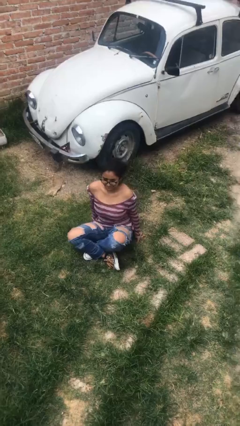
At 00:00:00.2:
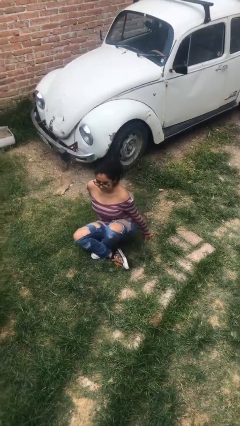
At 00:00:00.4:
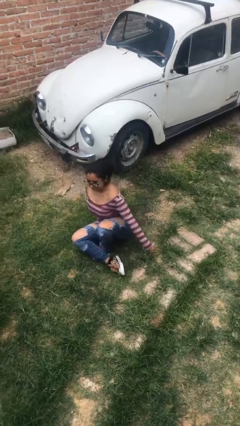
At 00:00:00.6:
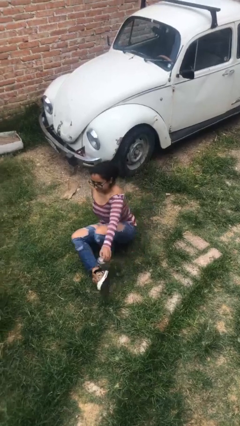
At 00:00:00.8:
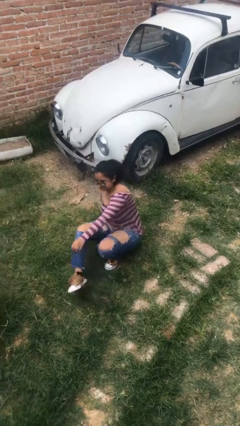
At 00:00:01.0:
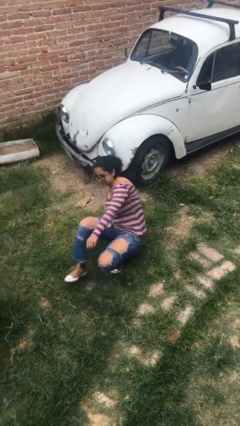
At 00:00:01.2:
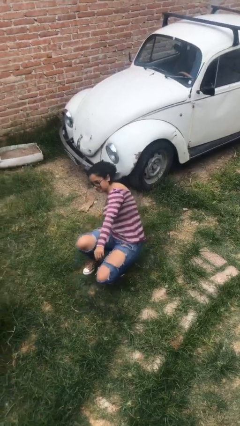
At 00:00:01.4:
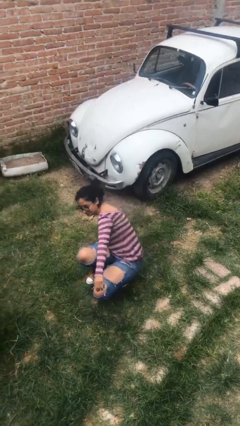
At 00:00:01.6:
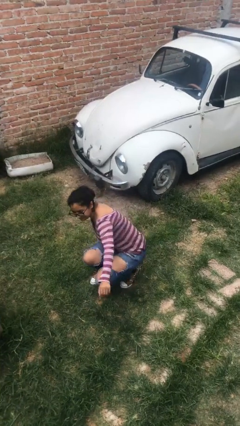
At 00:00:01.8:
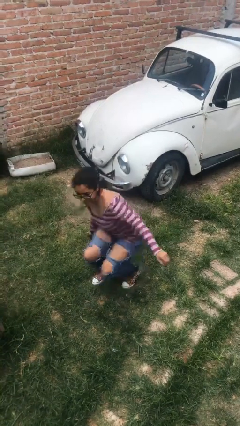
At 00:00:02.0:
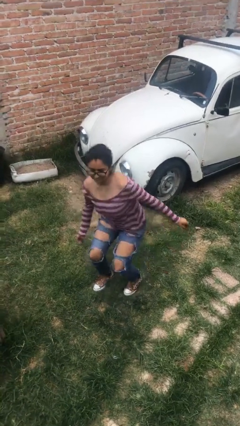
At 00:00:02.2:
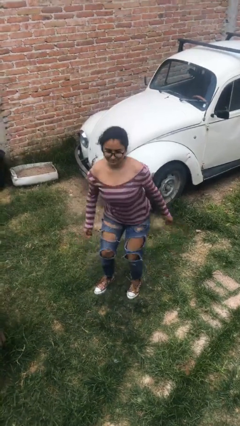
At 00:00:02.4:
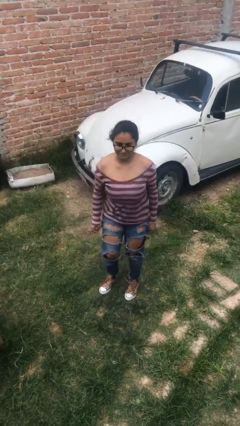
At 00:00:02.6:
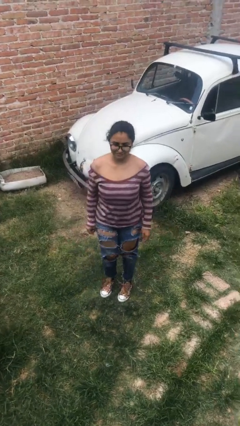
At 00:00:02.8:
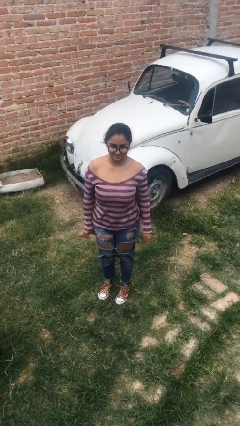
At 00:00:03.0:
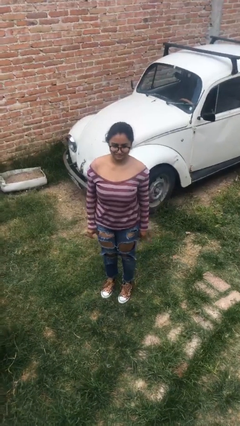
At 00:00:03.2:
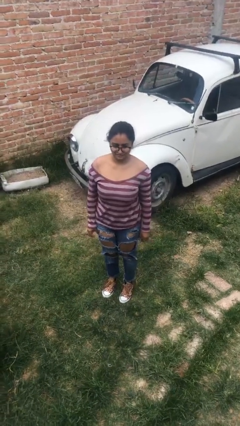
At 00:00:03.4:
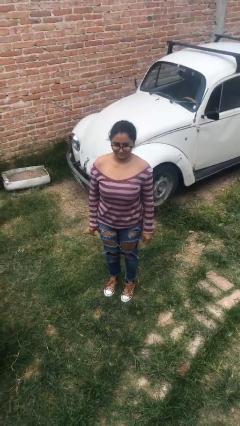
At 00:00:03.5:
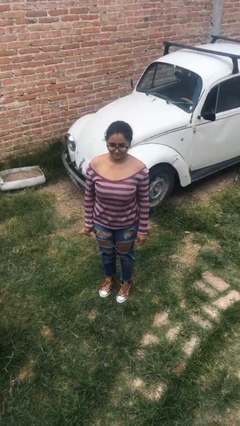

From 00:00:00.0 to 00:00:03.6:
person stands up from floor

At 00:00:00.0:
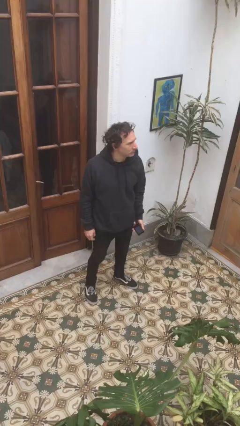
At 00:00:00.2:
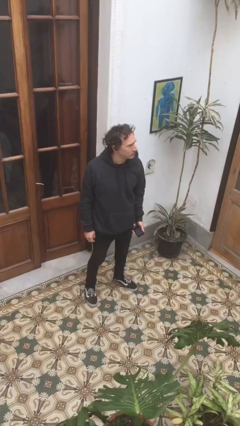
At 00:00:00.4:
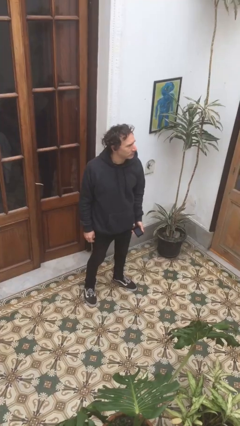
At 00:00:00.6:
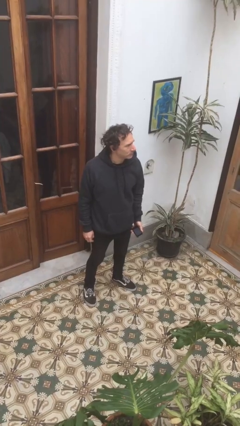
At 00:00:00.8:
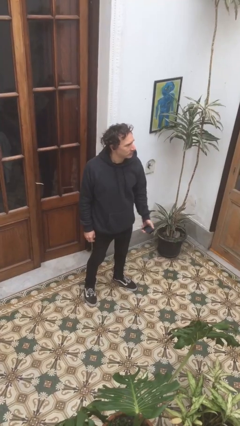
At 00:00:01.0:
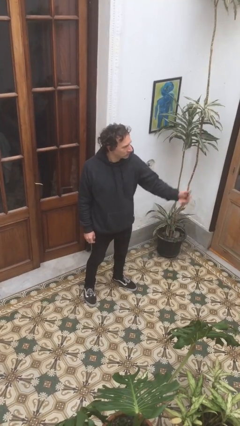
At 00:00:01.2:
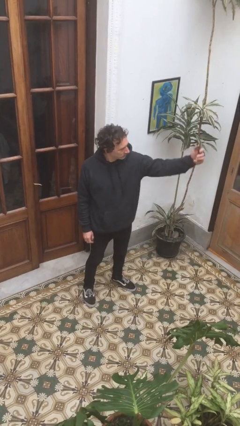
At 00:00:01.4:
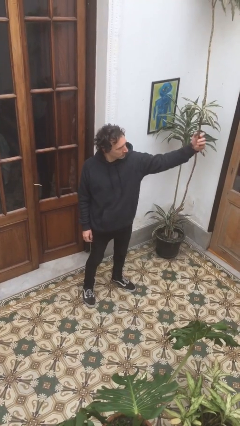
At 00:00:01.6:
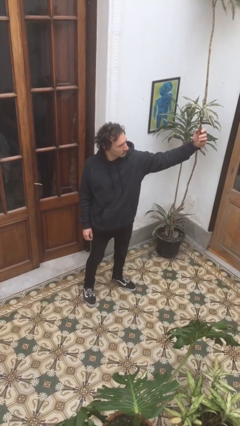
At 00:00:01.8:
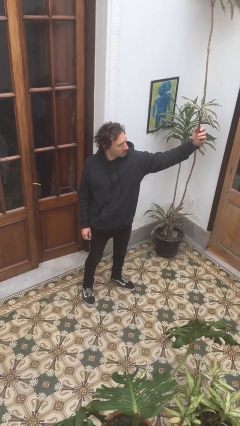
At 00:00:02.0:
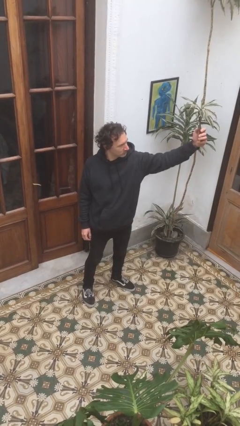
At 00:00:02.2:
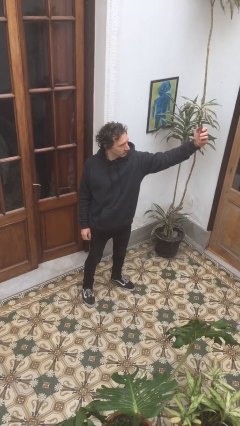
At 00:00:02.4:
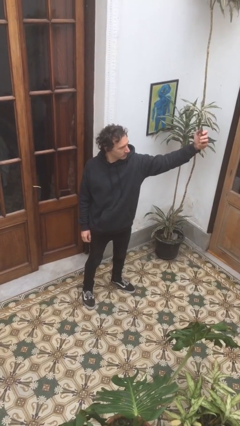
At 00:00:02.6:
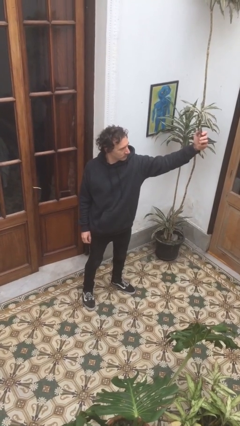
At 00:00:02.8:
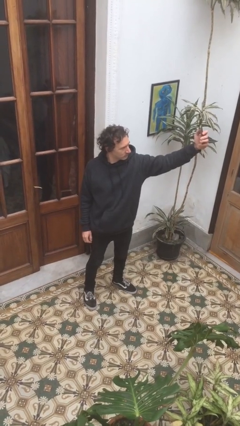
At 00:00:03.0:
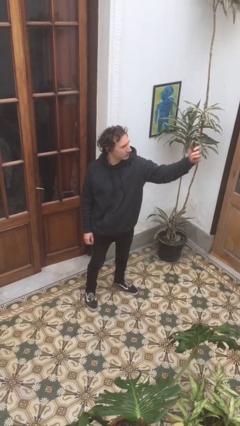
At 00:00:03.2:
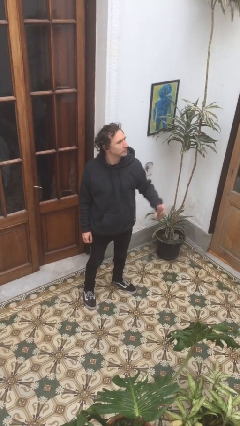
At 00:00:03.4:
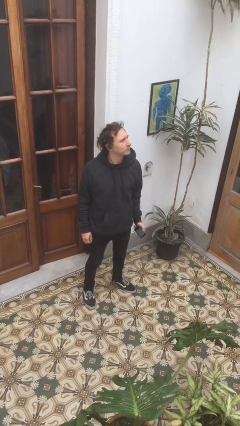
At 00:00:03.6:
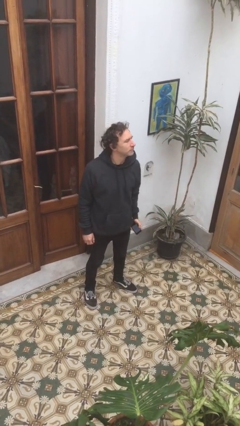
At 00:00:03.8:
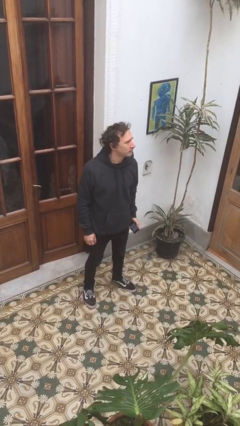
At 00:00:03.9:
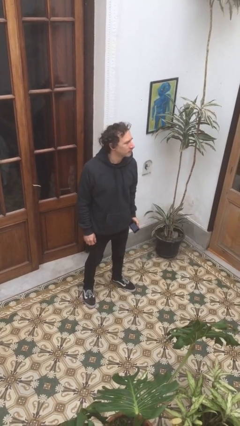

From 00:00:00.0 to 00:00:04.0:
person takes selfie

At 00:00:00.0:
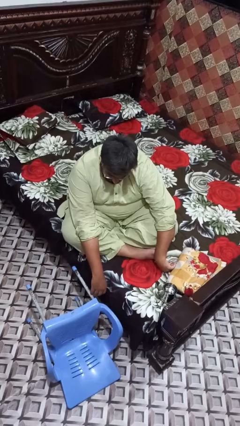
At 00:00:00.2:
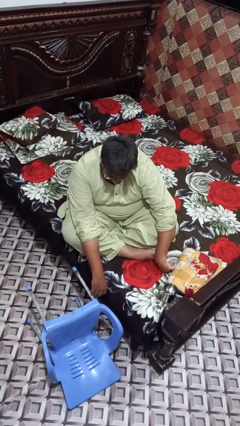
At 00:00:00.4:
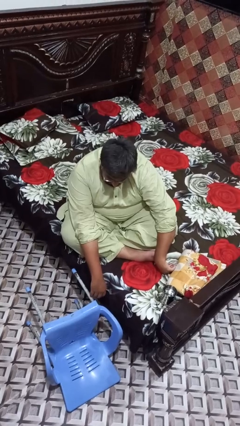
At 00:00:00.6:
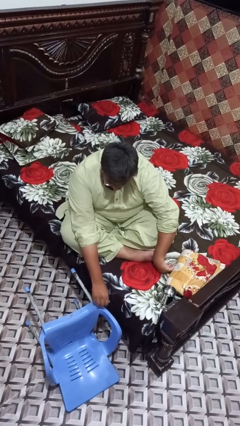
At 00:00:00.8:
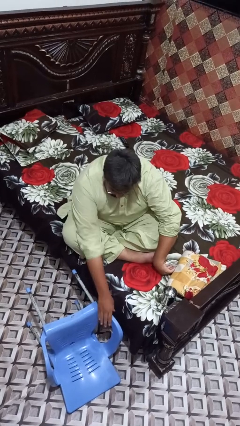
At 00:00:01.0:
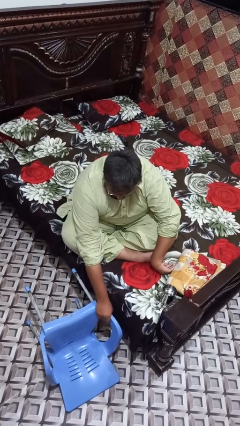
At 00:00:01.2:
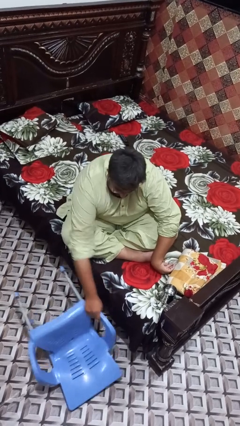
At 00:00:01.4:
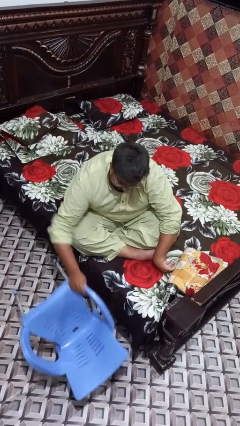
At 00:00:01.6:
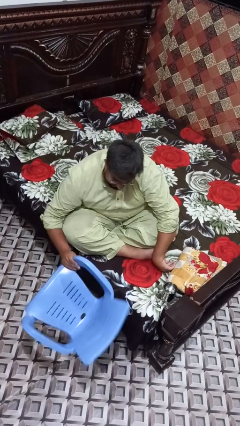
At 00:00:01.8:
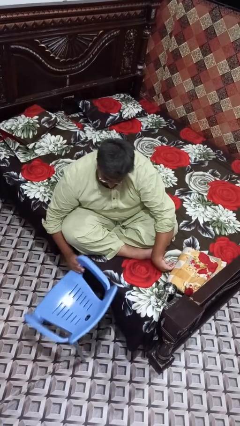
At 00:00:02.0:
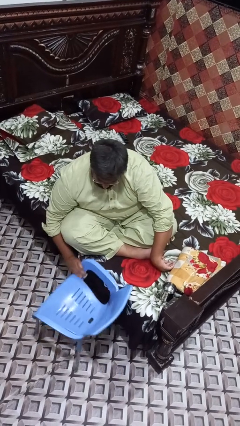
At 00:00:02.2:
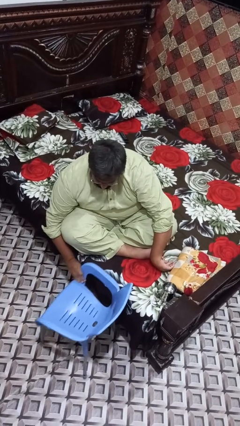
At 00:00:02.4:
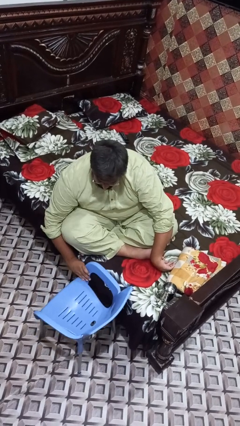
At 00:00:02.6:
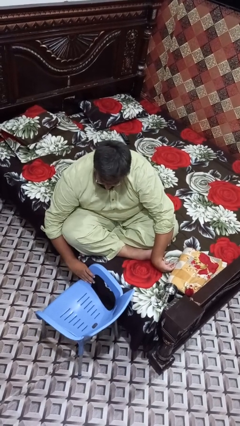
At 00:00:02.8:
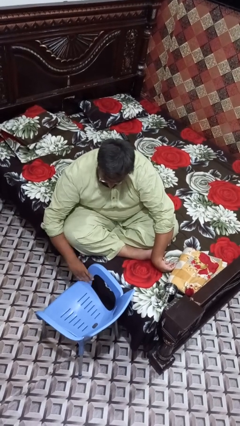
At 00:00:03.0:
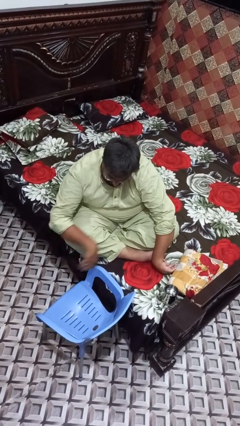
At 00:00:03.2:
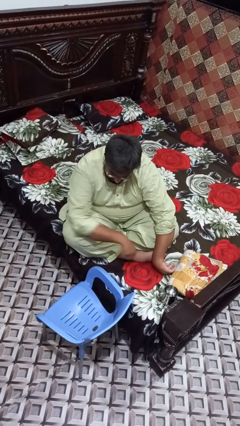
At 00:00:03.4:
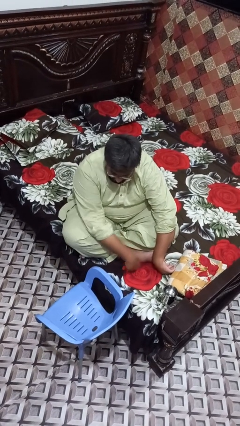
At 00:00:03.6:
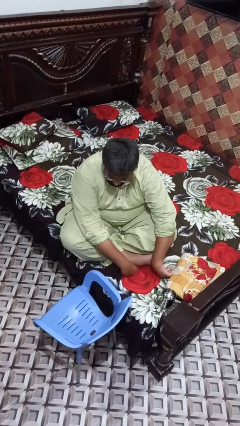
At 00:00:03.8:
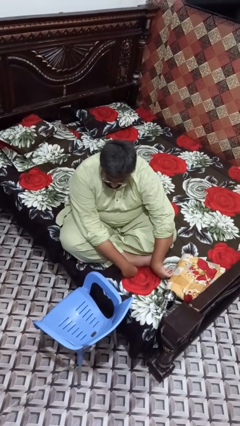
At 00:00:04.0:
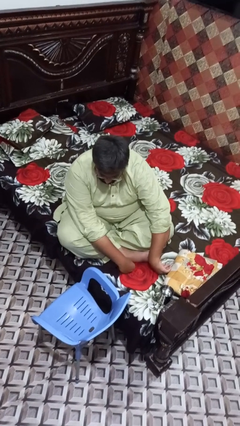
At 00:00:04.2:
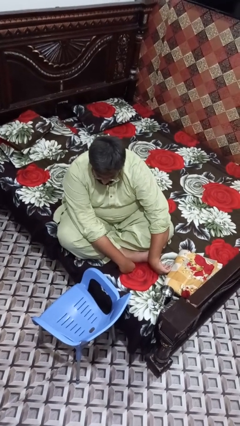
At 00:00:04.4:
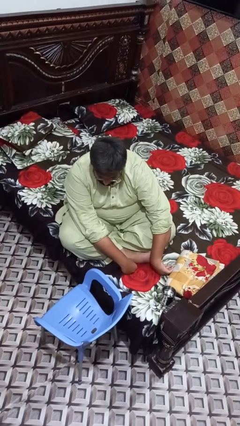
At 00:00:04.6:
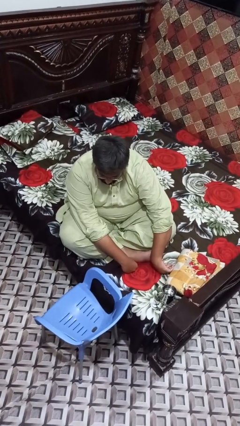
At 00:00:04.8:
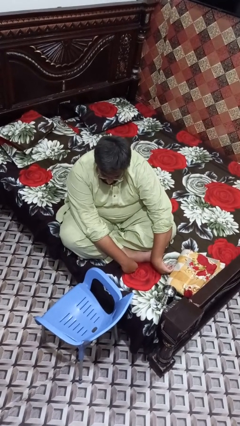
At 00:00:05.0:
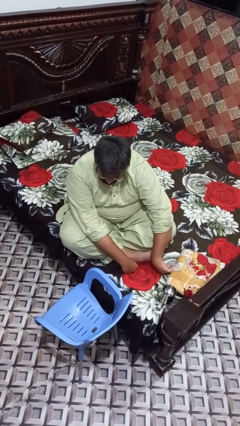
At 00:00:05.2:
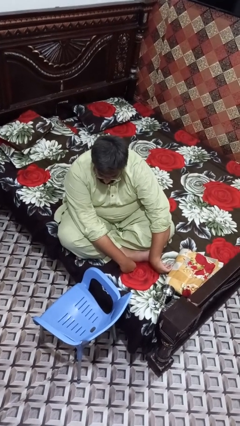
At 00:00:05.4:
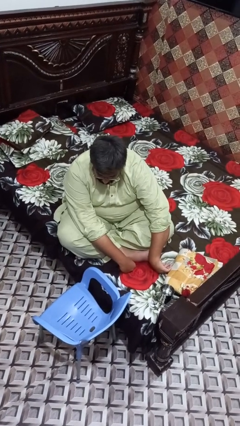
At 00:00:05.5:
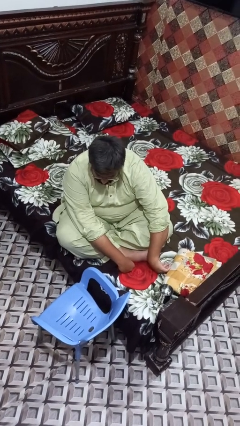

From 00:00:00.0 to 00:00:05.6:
person sets upright furniture

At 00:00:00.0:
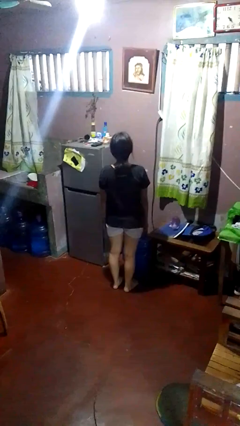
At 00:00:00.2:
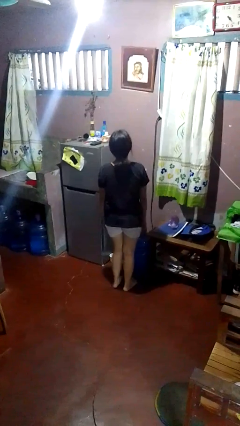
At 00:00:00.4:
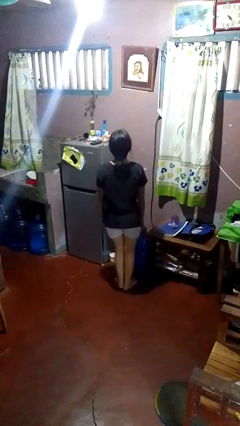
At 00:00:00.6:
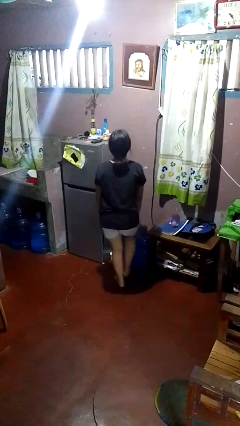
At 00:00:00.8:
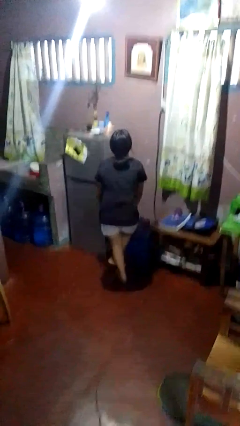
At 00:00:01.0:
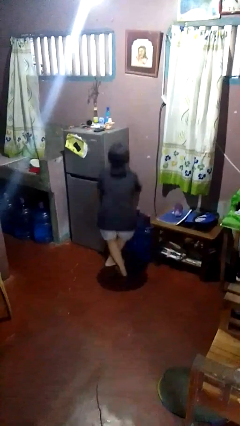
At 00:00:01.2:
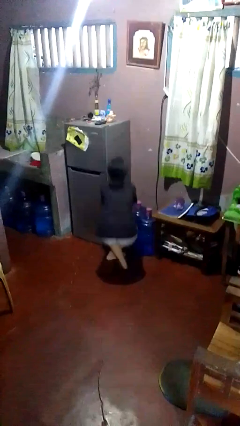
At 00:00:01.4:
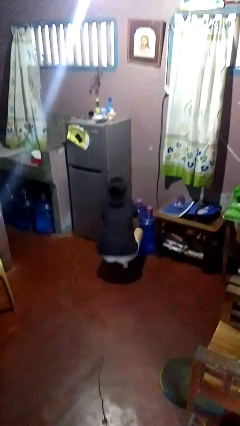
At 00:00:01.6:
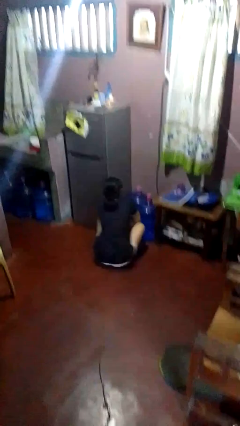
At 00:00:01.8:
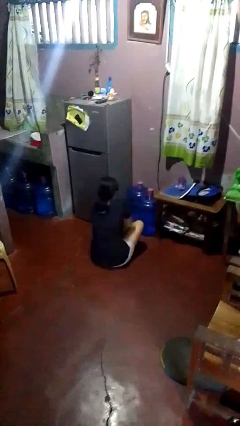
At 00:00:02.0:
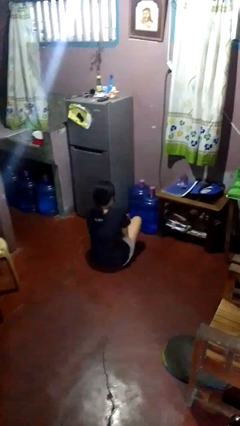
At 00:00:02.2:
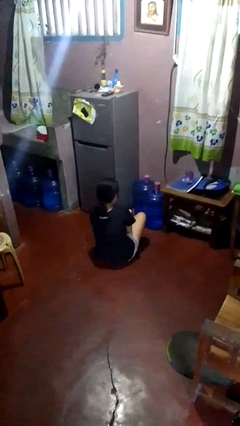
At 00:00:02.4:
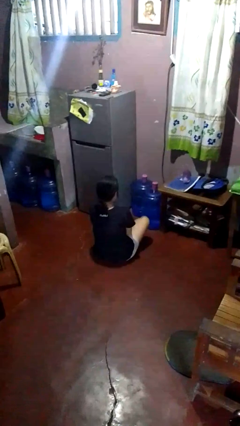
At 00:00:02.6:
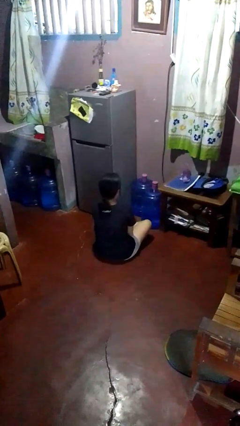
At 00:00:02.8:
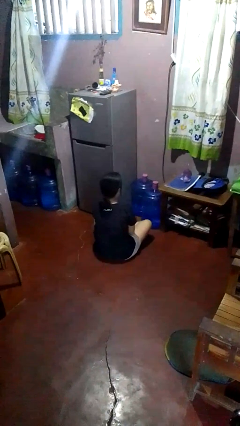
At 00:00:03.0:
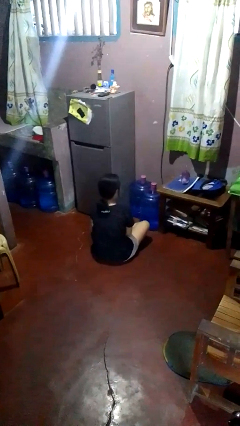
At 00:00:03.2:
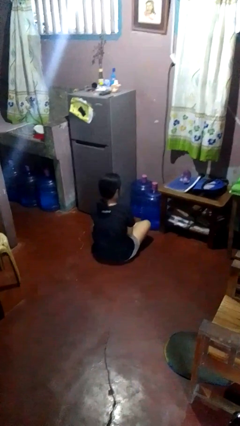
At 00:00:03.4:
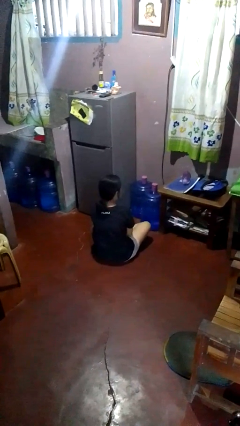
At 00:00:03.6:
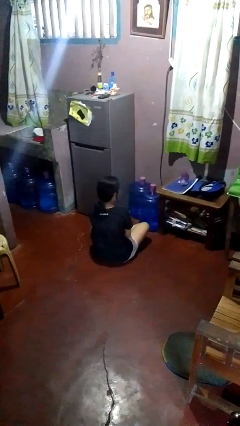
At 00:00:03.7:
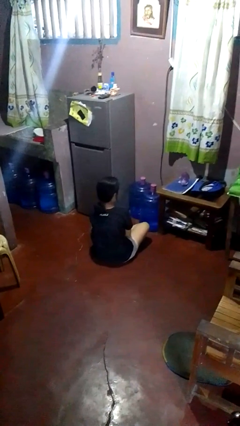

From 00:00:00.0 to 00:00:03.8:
person sits crisscross

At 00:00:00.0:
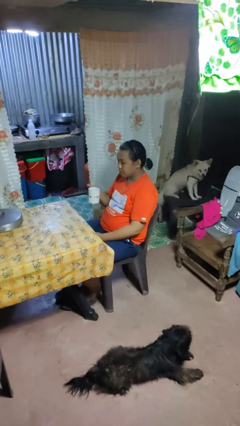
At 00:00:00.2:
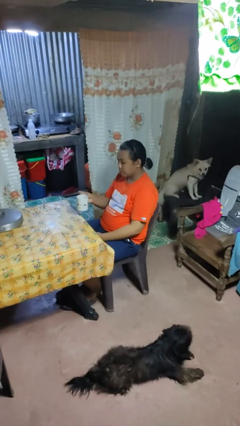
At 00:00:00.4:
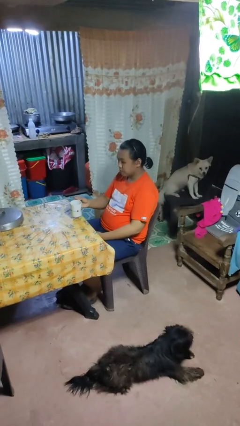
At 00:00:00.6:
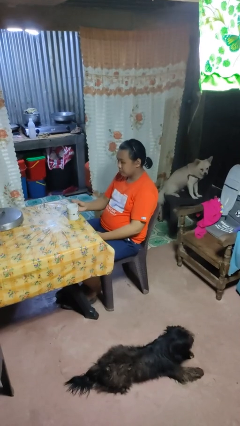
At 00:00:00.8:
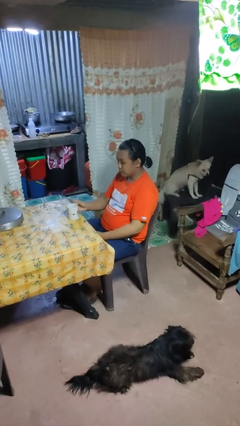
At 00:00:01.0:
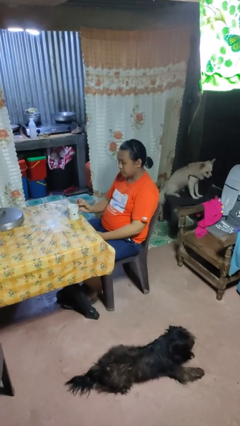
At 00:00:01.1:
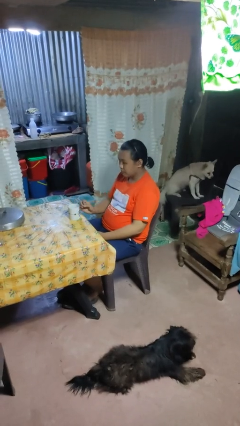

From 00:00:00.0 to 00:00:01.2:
person puts down object on table
